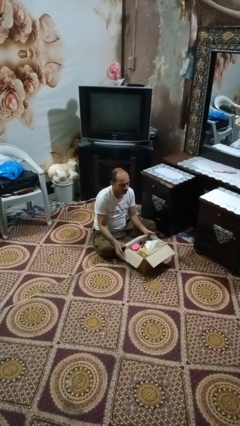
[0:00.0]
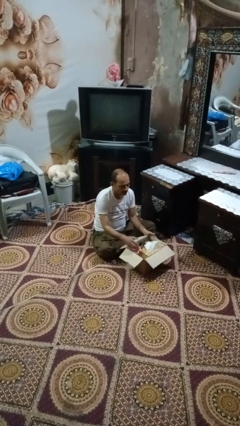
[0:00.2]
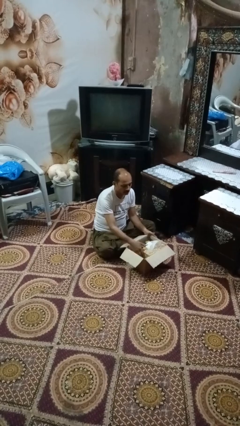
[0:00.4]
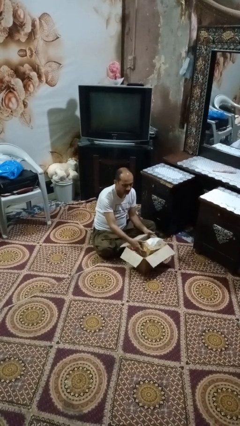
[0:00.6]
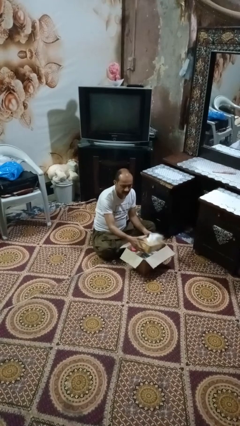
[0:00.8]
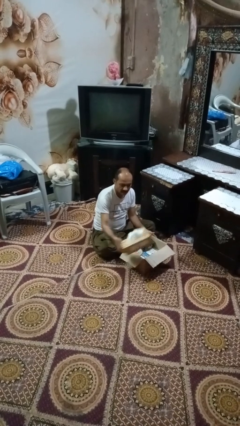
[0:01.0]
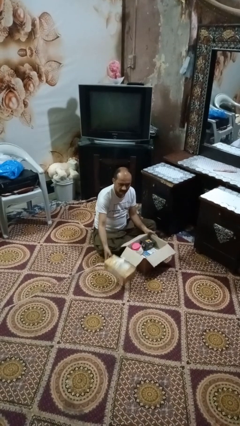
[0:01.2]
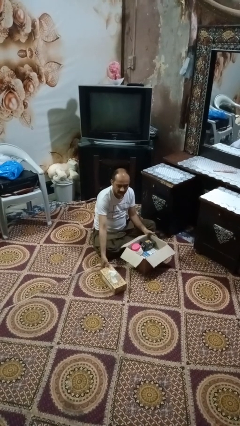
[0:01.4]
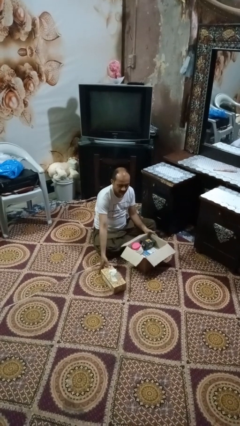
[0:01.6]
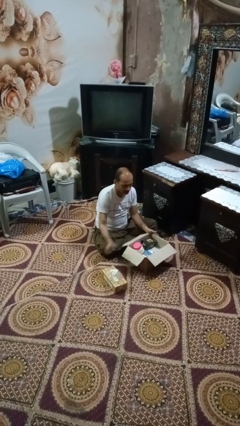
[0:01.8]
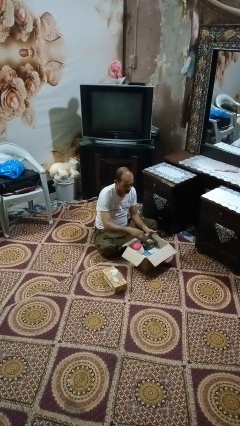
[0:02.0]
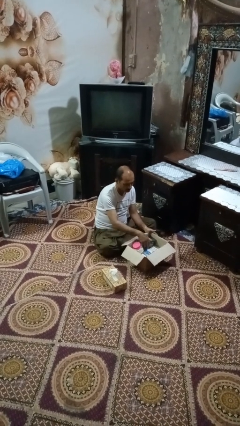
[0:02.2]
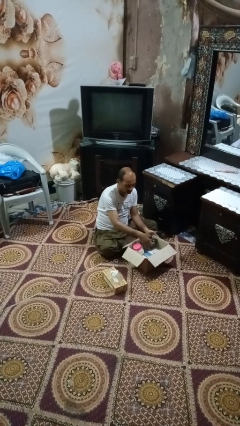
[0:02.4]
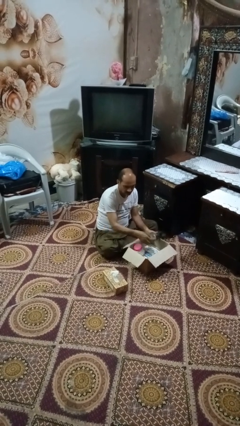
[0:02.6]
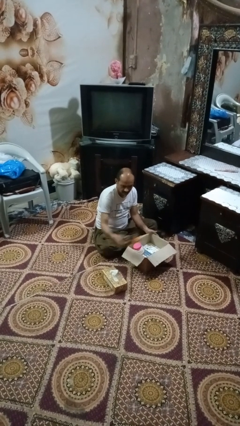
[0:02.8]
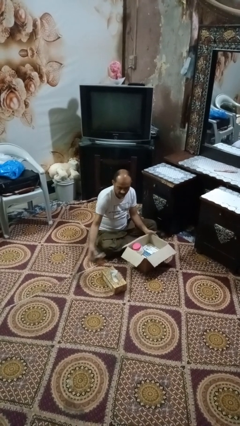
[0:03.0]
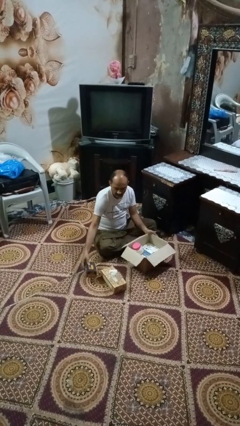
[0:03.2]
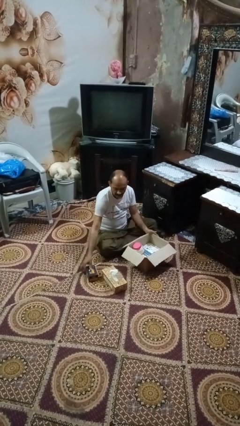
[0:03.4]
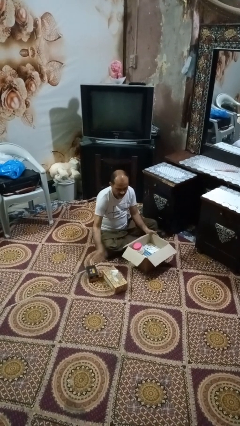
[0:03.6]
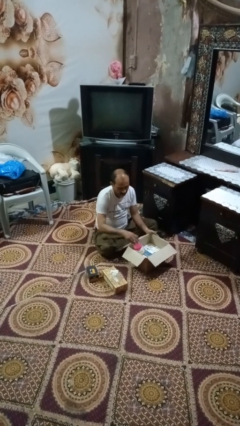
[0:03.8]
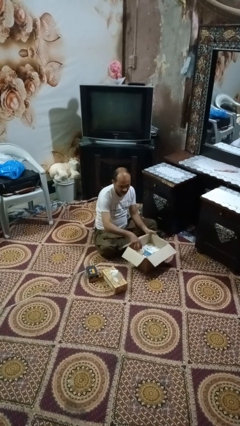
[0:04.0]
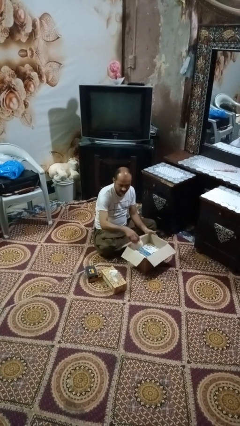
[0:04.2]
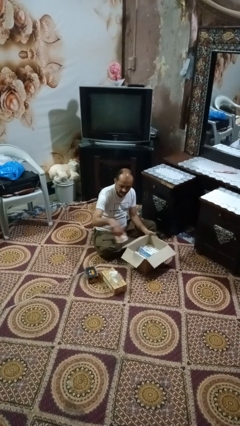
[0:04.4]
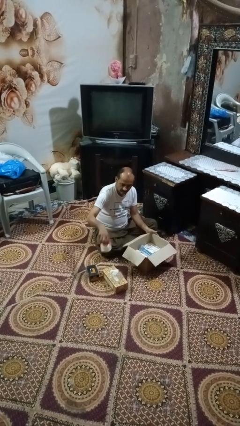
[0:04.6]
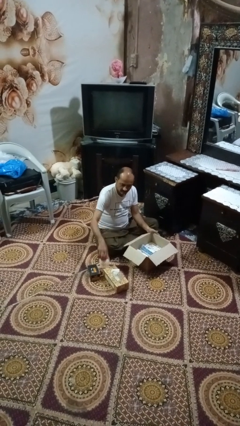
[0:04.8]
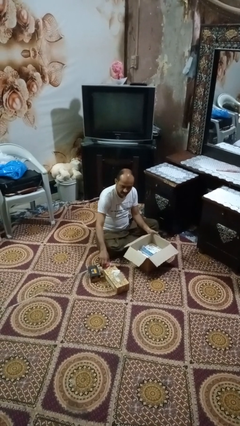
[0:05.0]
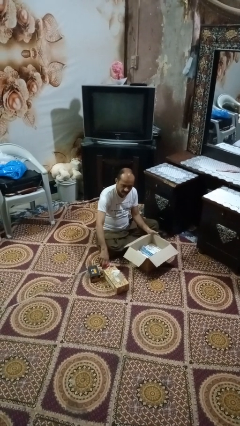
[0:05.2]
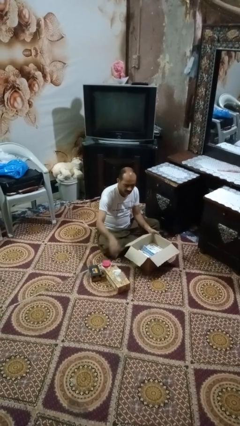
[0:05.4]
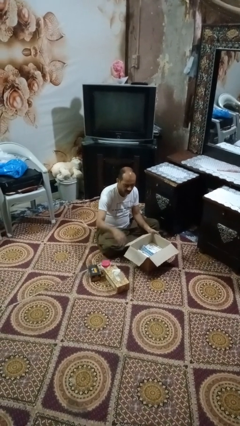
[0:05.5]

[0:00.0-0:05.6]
person takes object from box

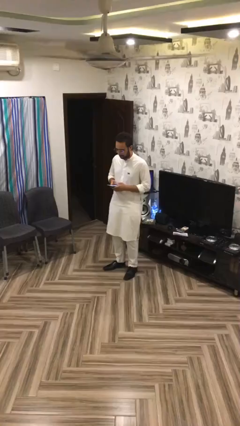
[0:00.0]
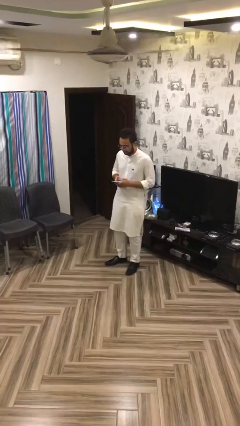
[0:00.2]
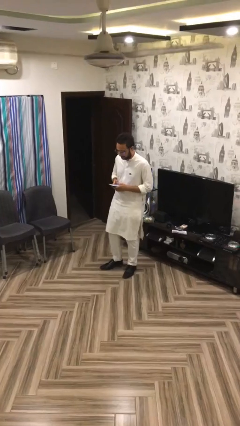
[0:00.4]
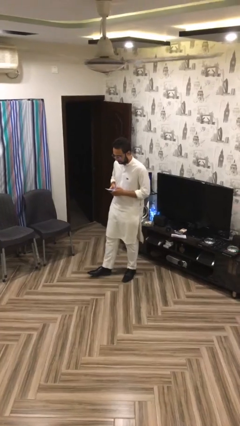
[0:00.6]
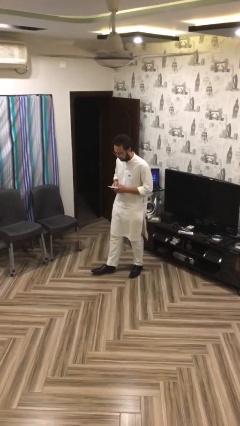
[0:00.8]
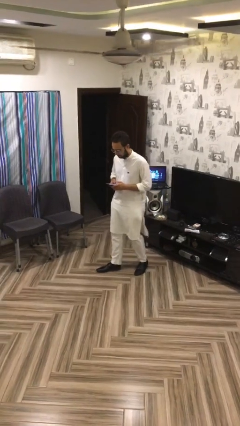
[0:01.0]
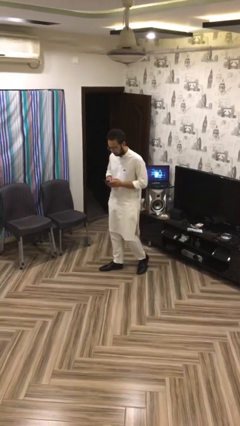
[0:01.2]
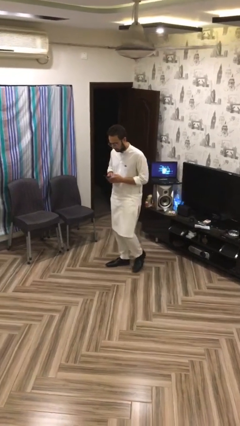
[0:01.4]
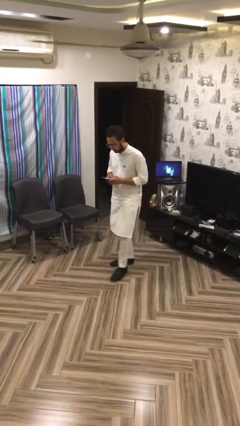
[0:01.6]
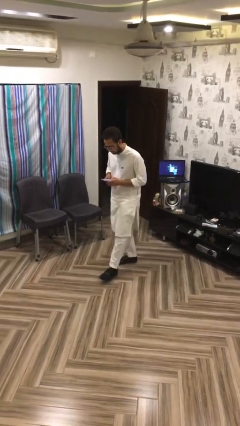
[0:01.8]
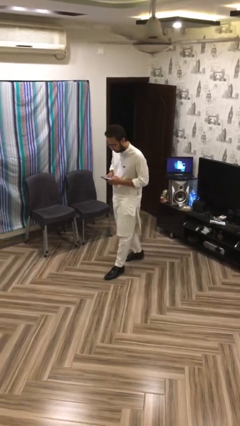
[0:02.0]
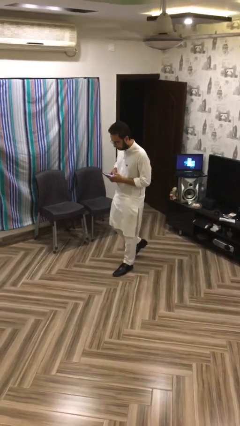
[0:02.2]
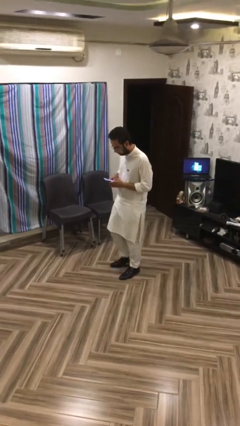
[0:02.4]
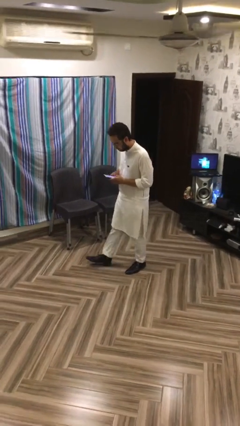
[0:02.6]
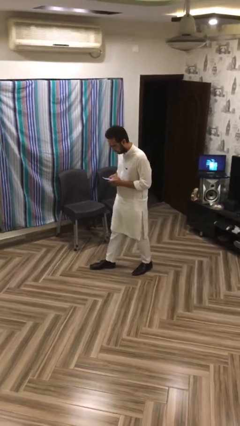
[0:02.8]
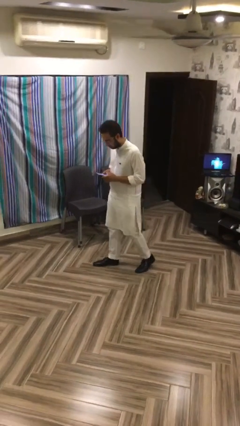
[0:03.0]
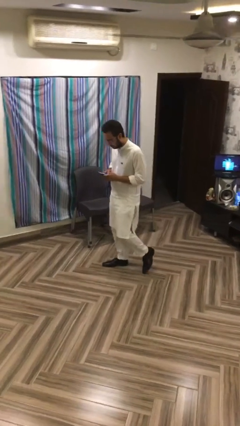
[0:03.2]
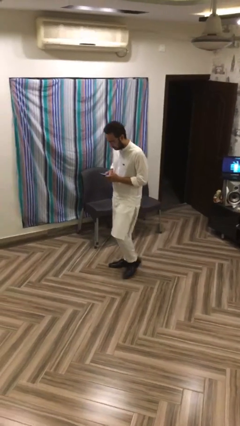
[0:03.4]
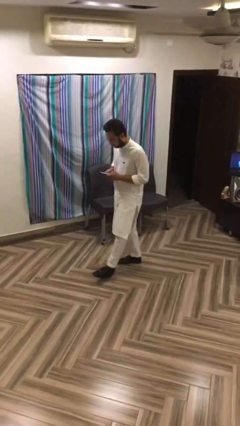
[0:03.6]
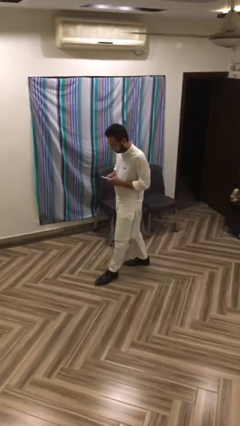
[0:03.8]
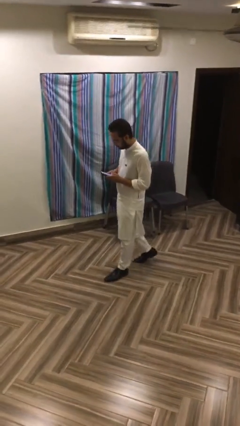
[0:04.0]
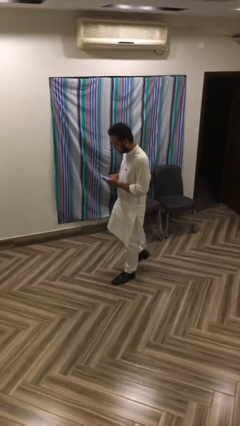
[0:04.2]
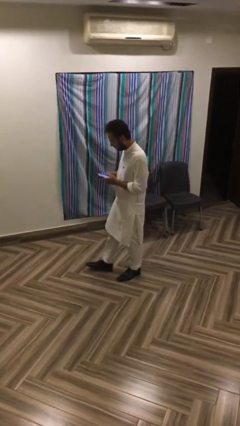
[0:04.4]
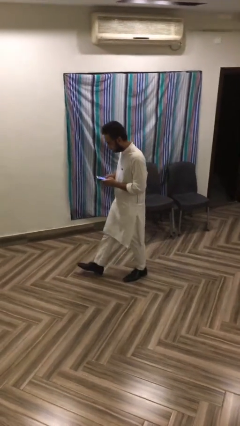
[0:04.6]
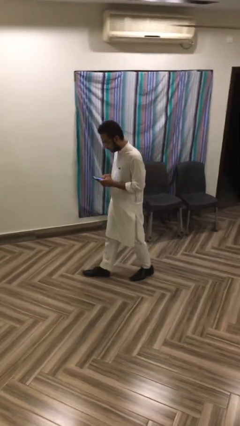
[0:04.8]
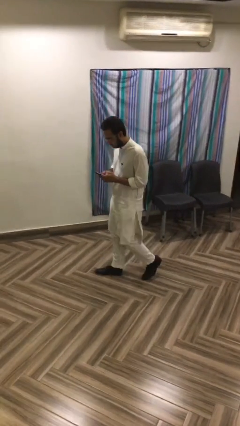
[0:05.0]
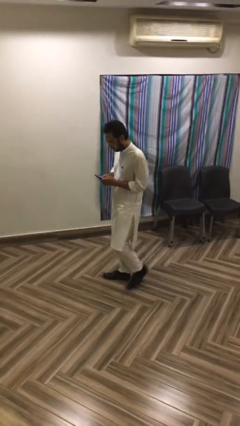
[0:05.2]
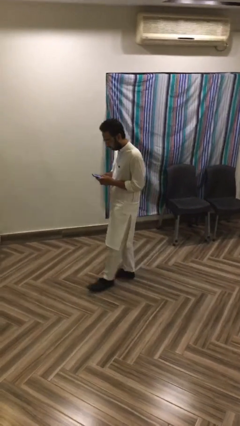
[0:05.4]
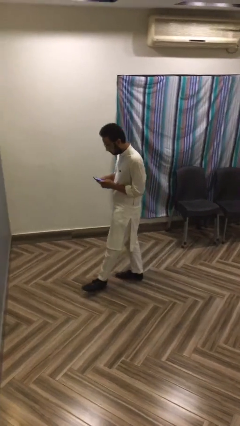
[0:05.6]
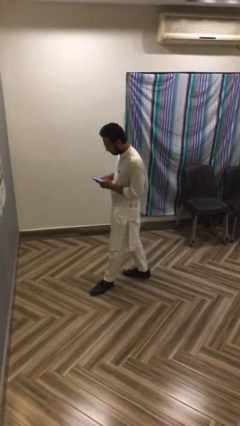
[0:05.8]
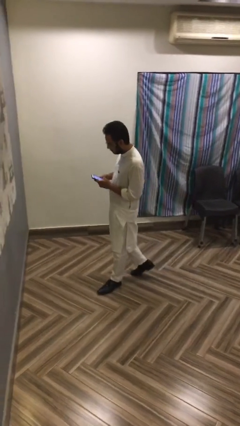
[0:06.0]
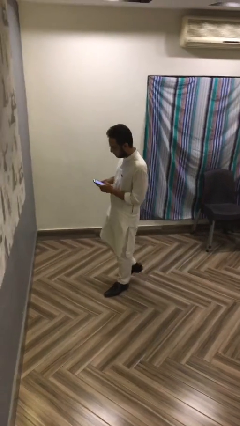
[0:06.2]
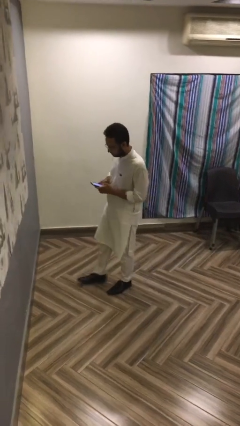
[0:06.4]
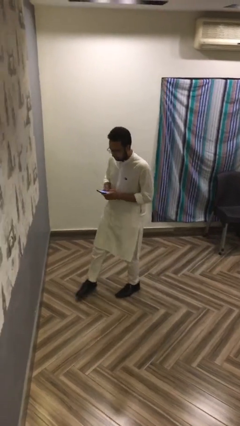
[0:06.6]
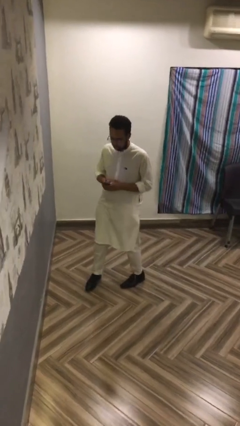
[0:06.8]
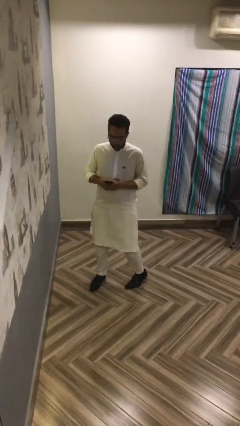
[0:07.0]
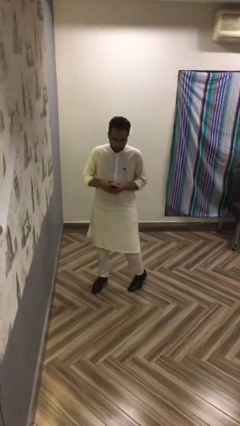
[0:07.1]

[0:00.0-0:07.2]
person texts on phone

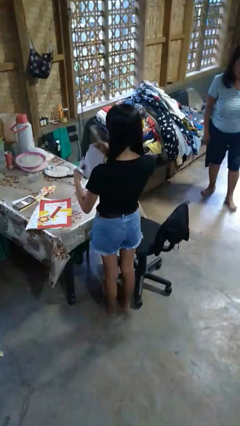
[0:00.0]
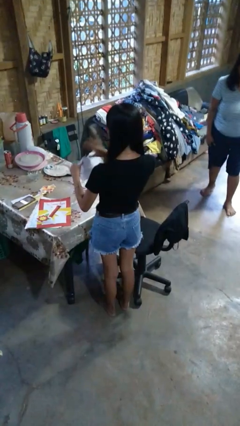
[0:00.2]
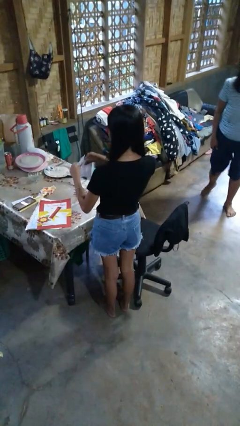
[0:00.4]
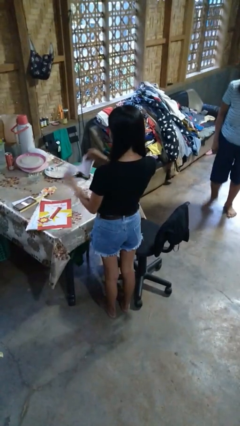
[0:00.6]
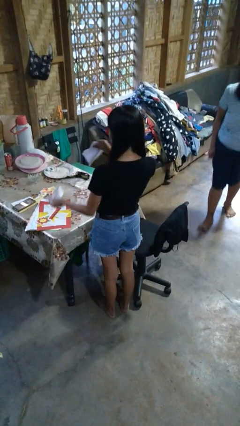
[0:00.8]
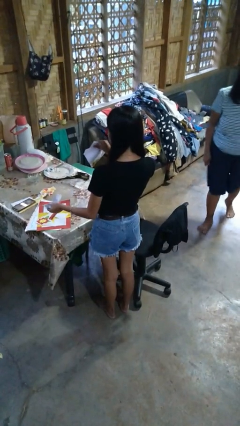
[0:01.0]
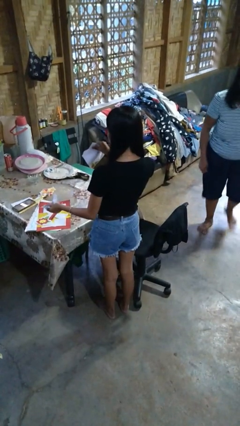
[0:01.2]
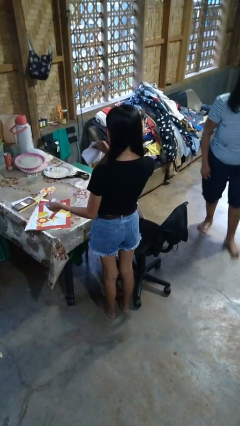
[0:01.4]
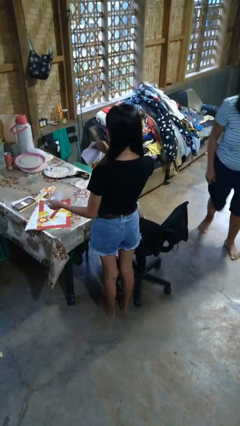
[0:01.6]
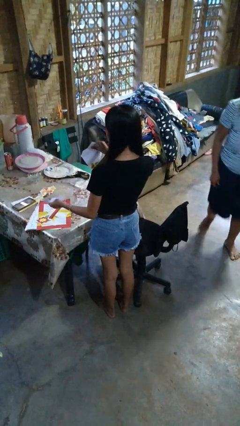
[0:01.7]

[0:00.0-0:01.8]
person tears paper

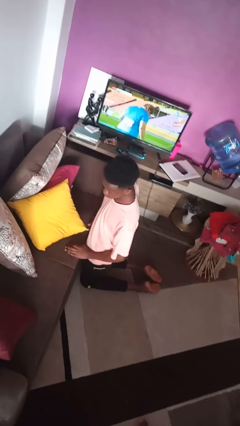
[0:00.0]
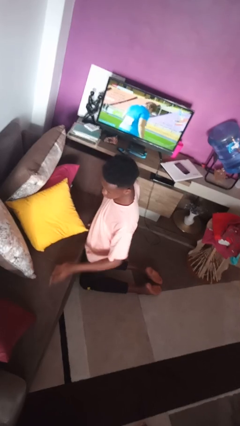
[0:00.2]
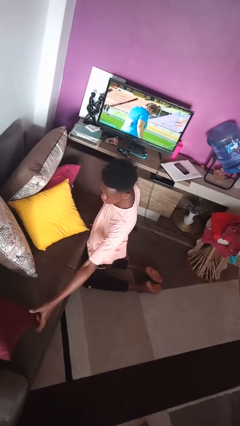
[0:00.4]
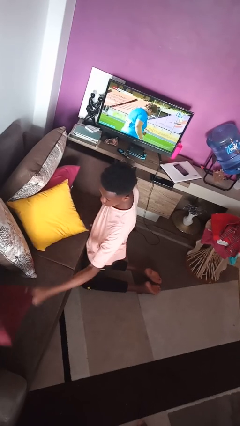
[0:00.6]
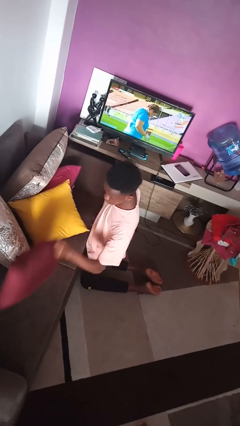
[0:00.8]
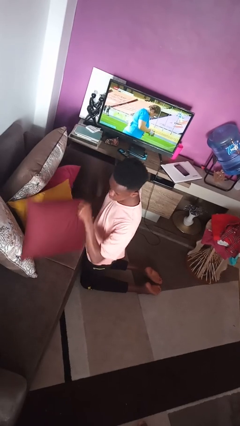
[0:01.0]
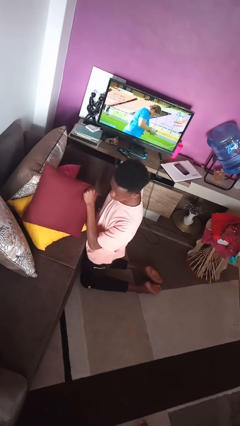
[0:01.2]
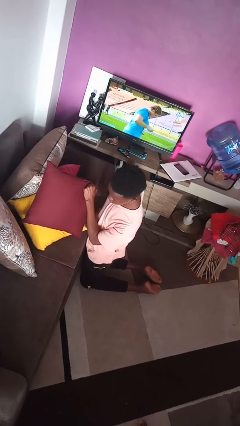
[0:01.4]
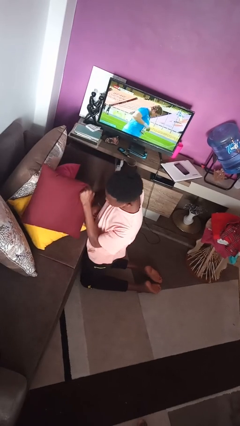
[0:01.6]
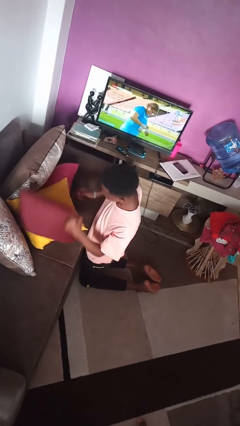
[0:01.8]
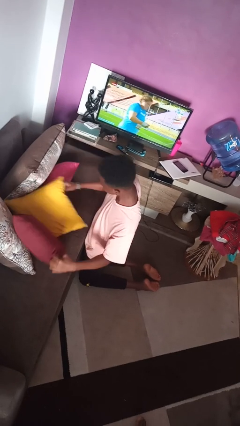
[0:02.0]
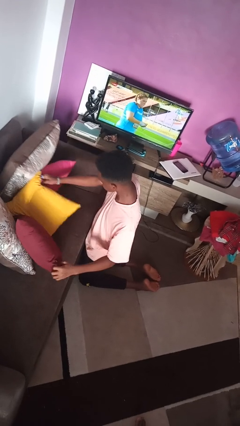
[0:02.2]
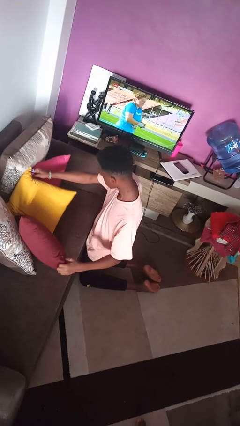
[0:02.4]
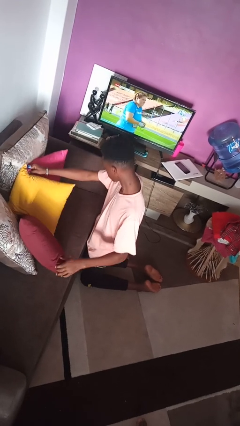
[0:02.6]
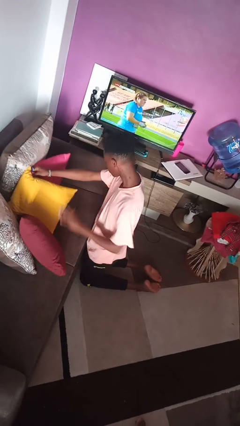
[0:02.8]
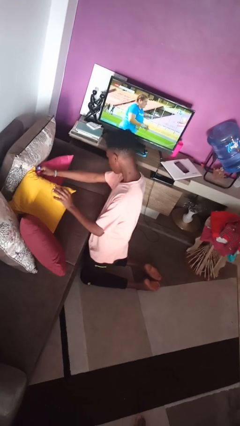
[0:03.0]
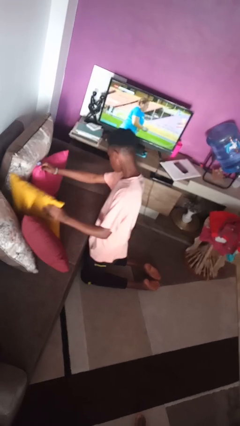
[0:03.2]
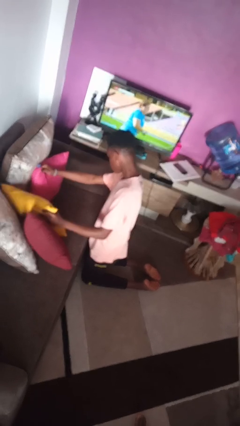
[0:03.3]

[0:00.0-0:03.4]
person searches in couch
